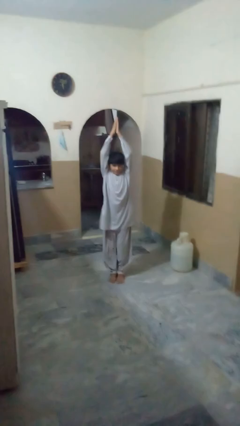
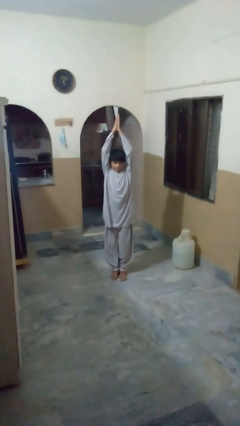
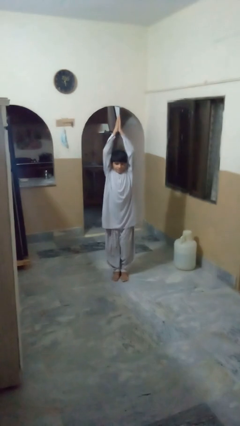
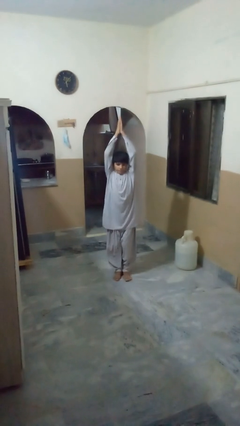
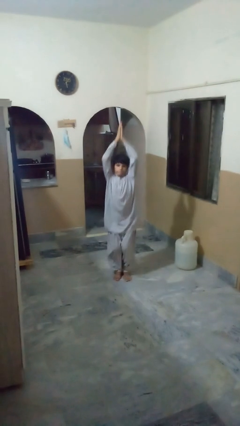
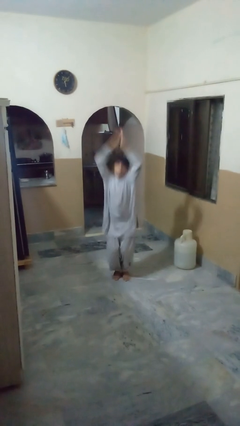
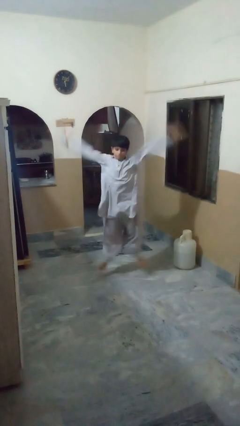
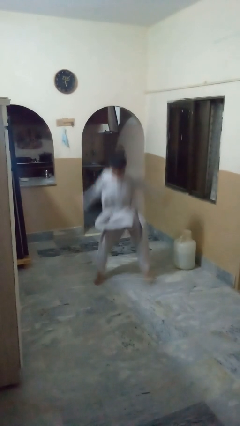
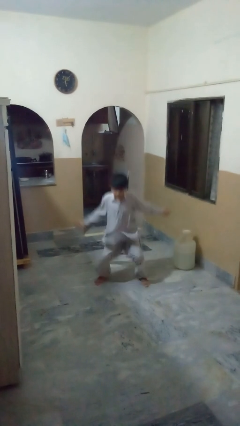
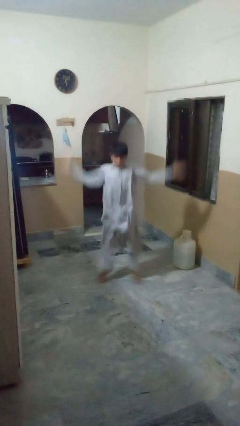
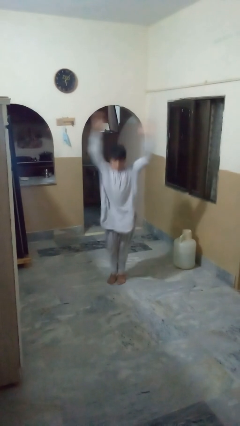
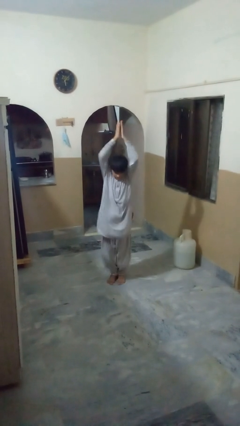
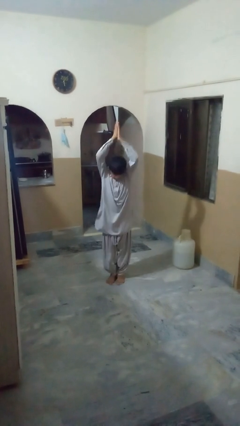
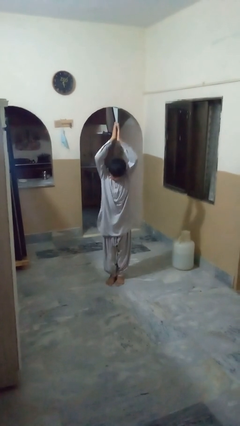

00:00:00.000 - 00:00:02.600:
person exercises with jumping jacks

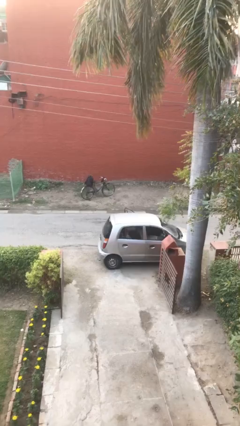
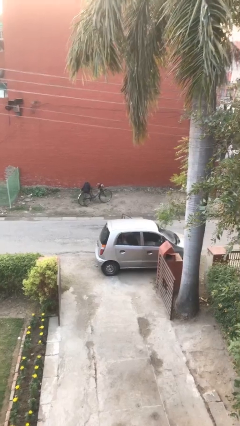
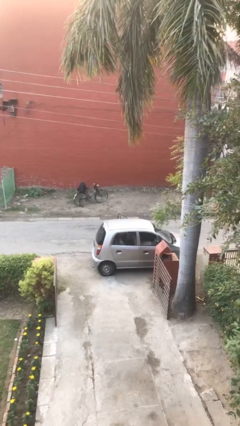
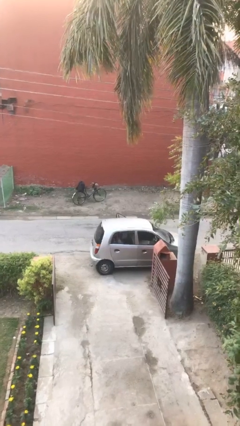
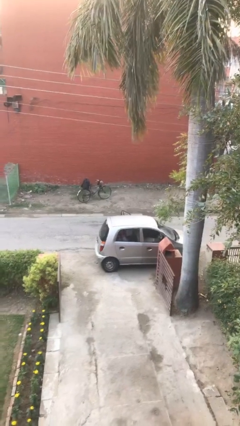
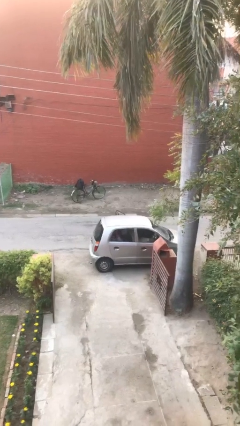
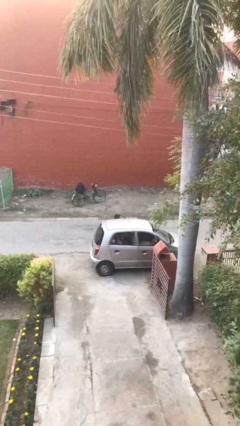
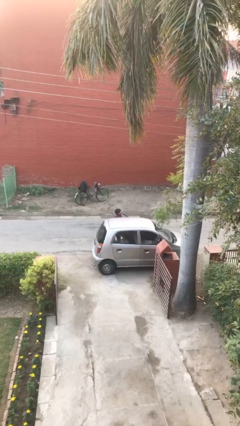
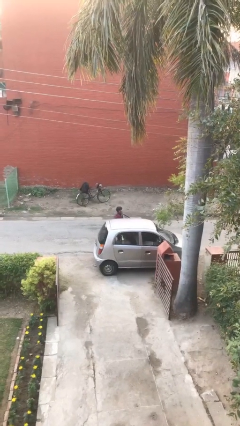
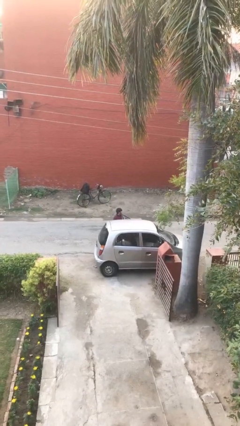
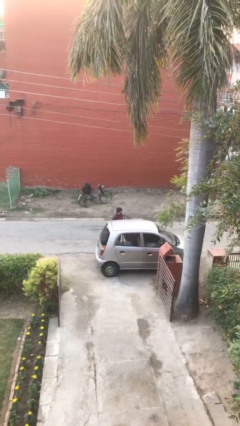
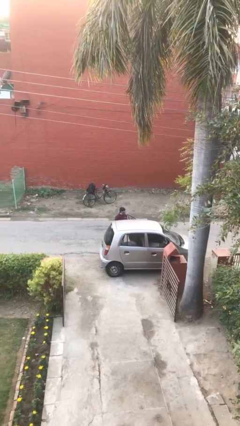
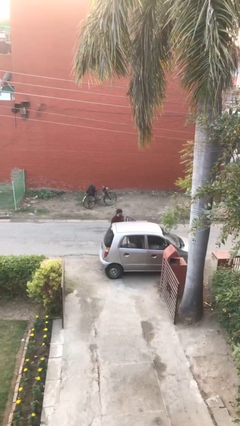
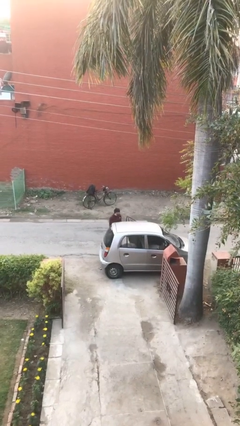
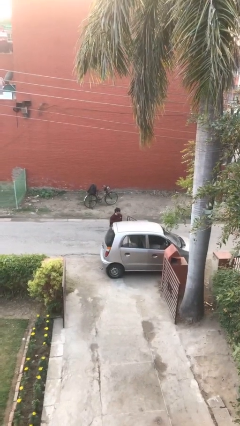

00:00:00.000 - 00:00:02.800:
person exits car

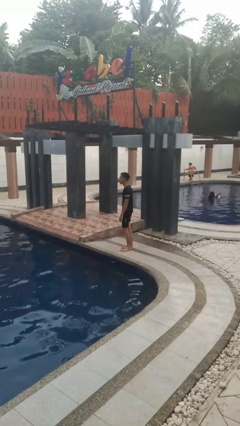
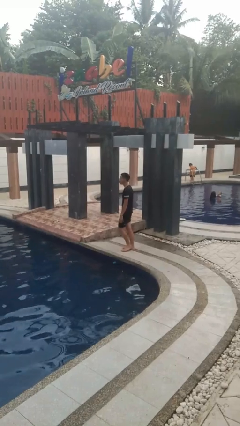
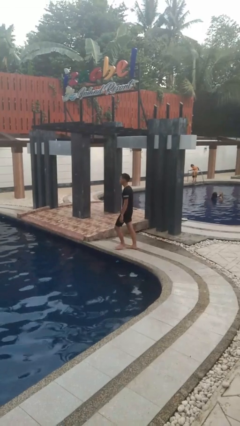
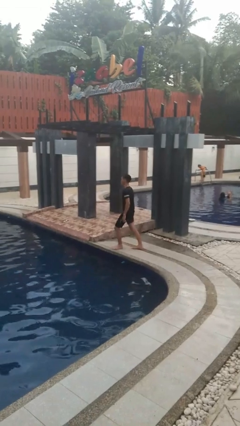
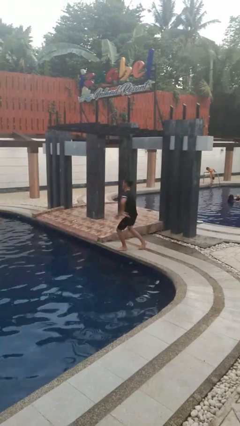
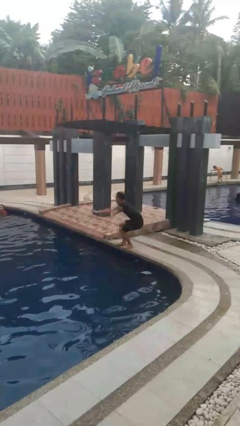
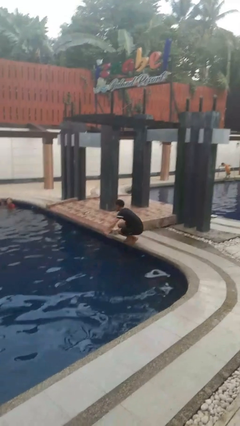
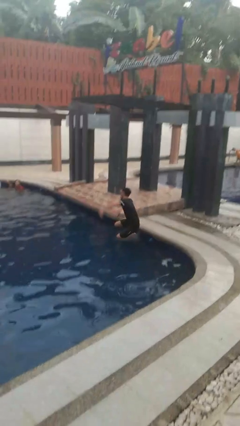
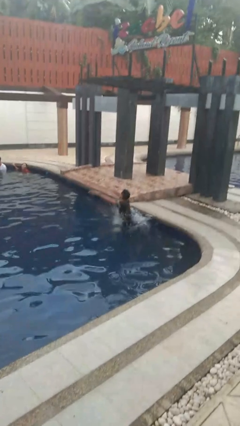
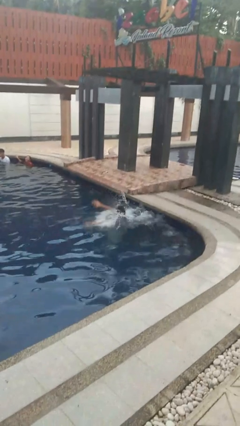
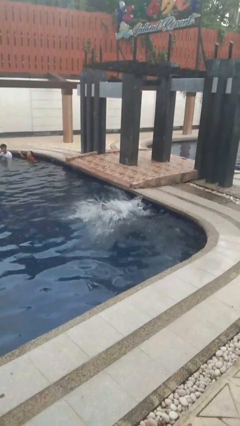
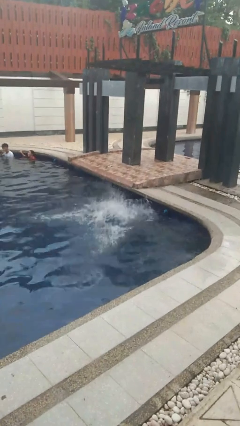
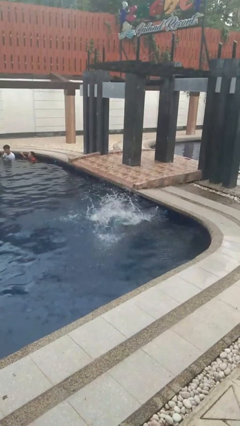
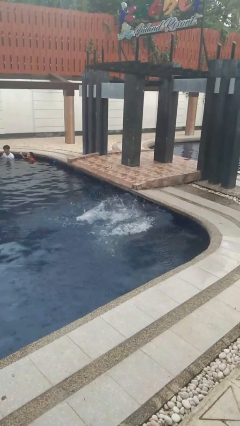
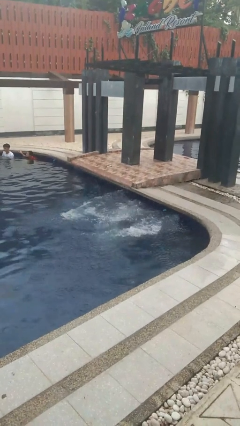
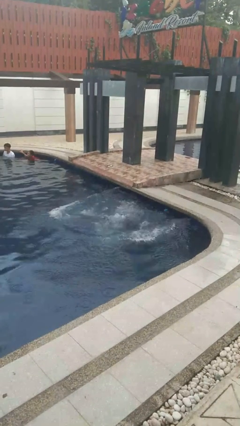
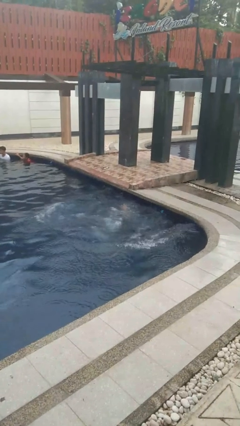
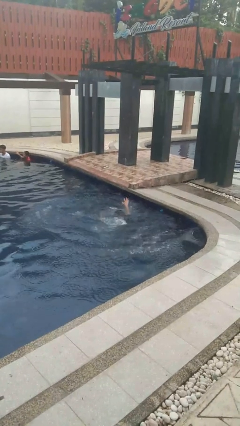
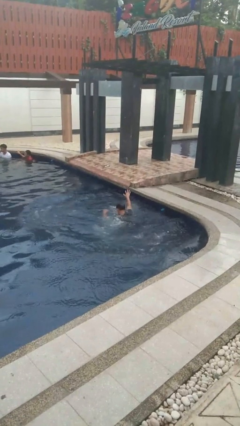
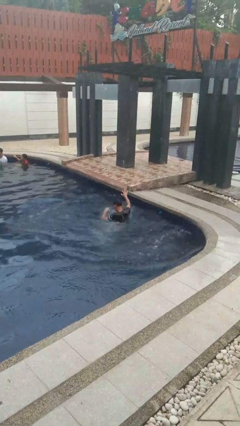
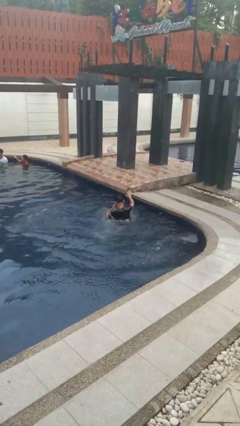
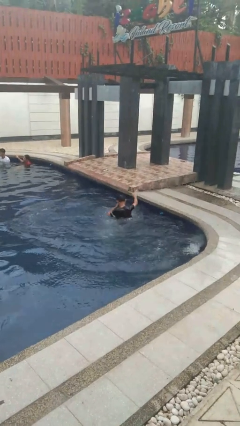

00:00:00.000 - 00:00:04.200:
person falls into pool

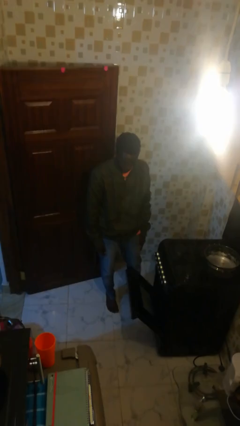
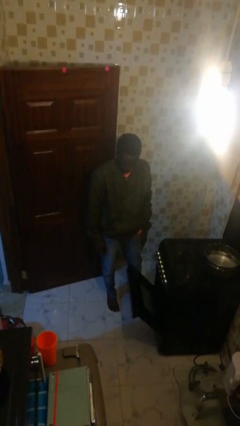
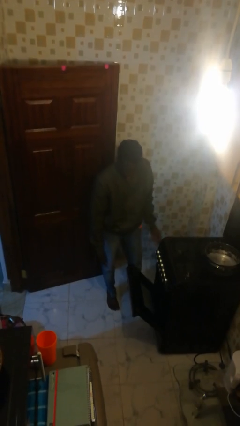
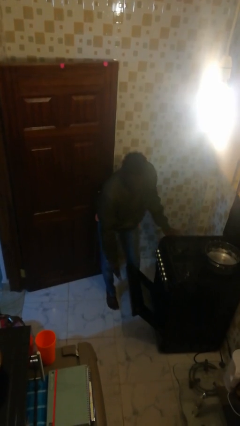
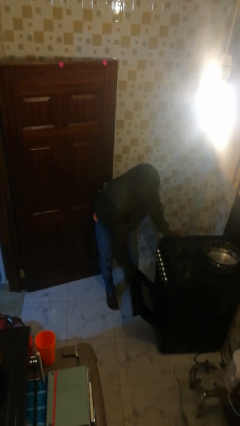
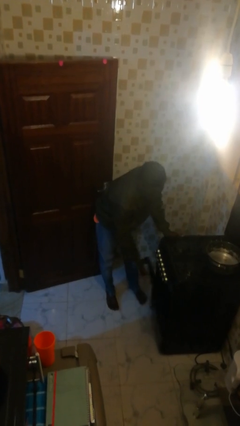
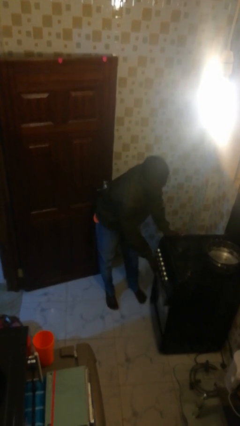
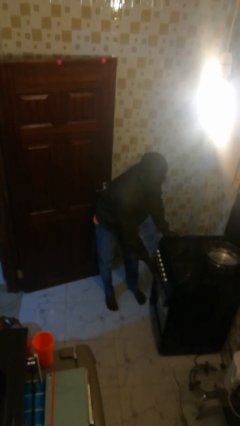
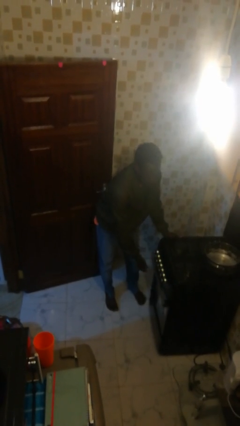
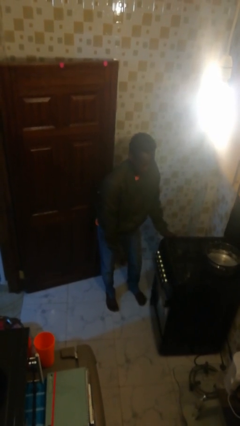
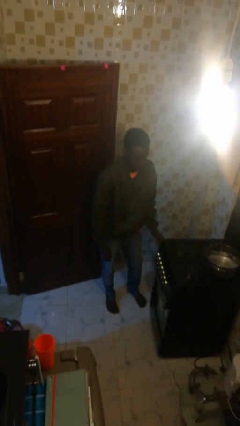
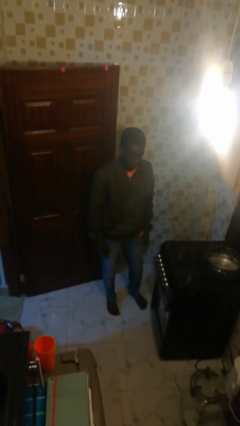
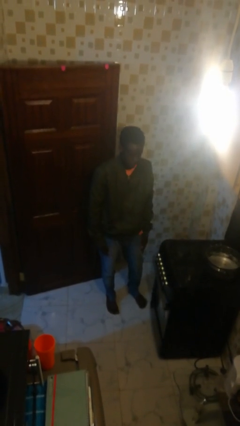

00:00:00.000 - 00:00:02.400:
person closes oven door

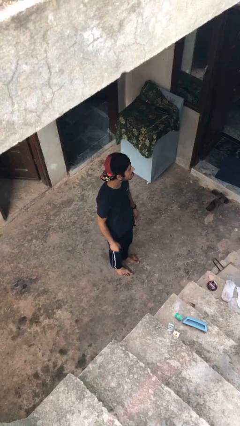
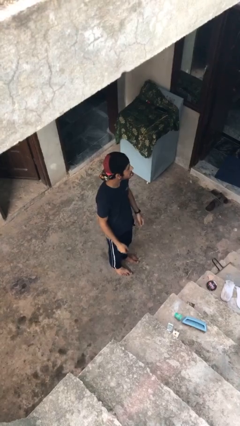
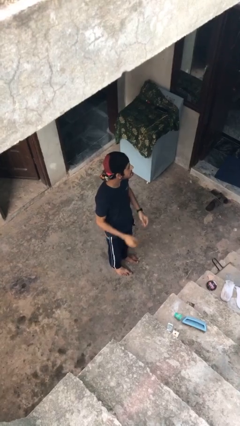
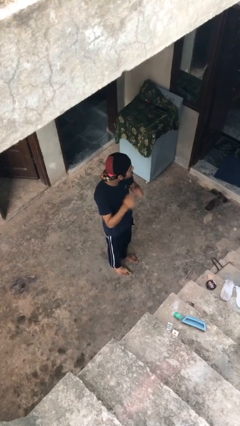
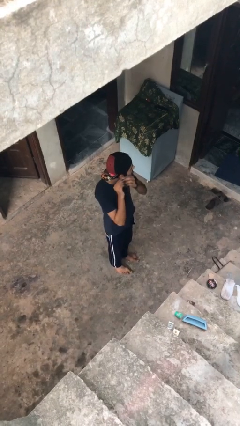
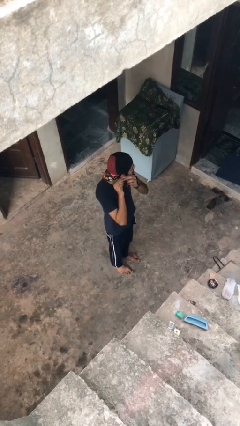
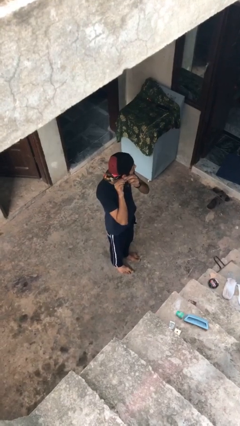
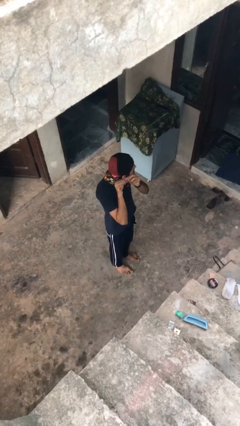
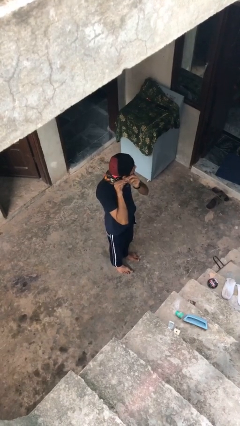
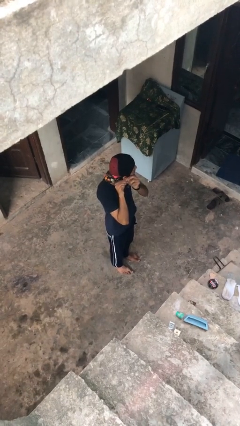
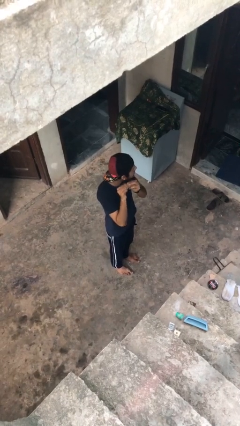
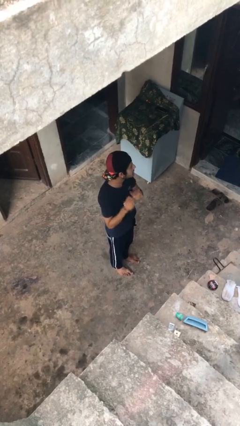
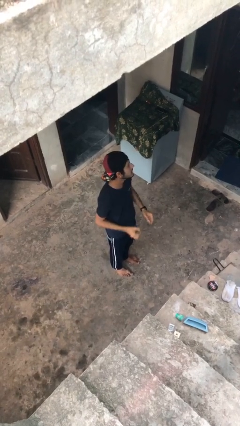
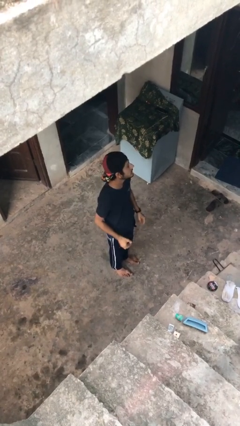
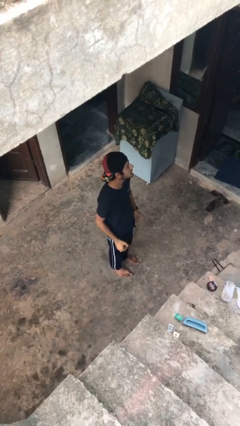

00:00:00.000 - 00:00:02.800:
person takes off earrings

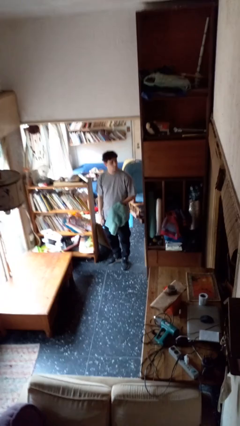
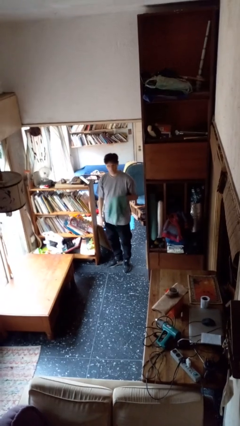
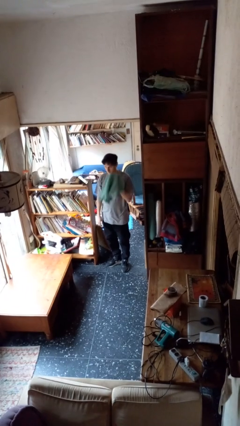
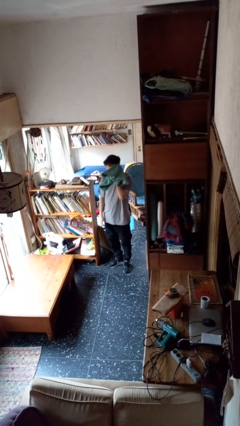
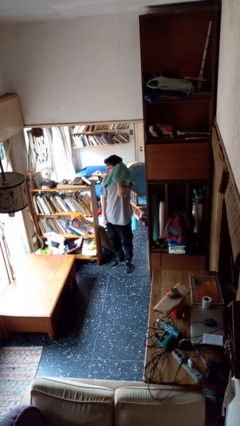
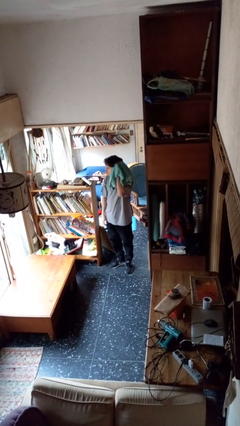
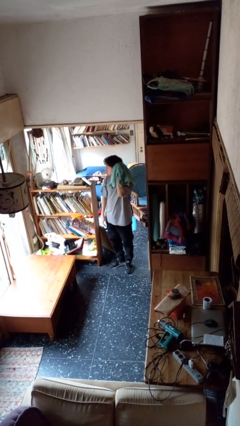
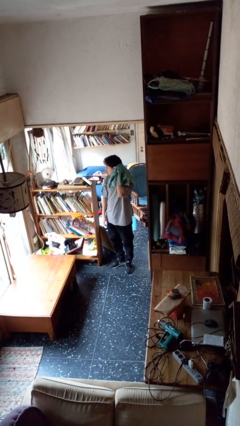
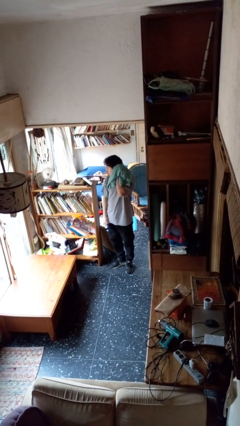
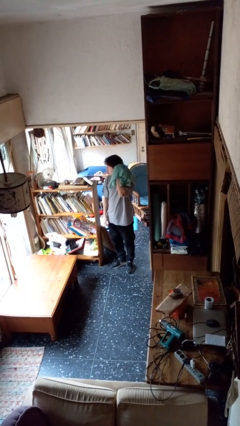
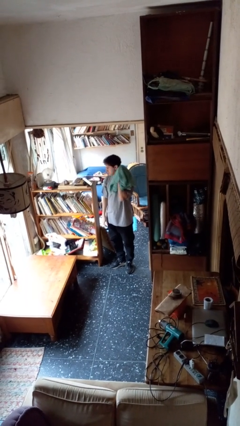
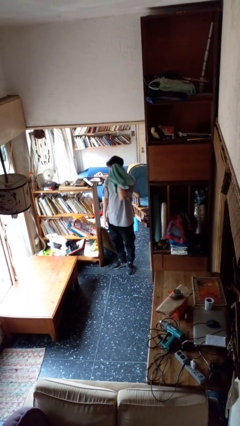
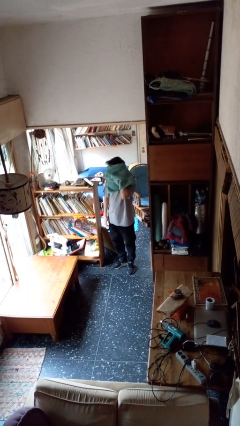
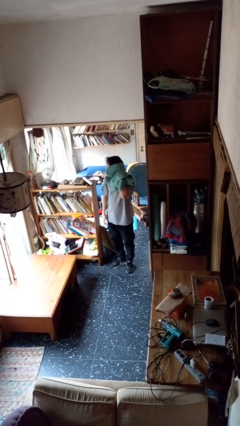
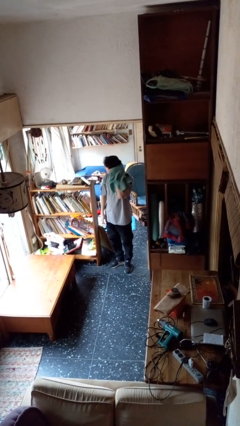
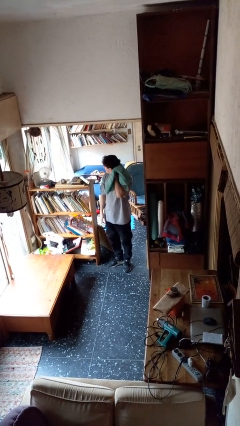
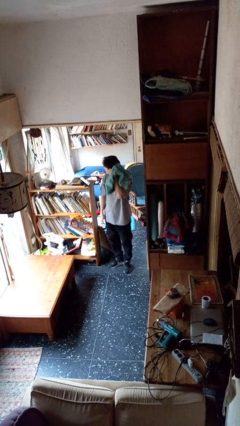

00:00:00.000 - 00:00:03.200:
person dries hair with towel
